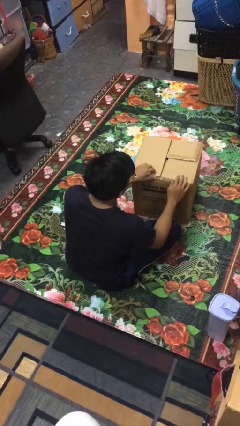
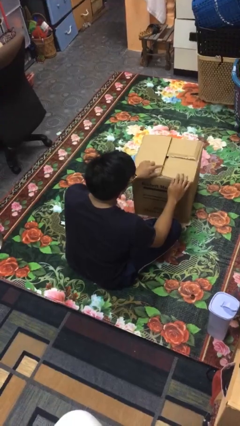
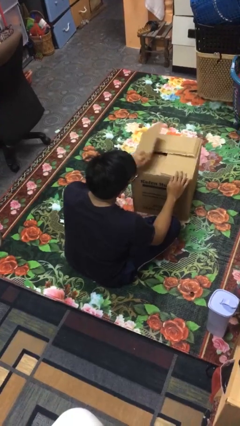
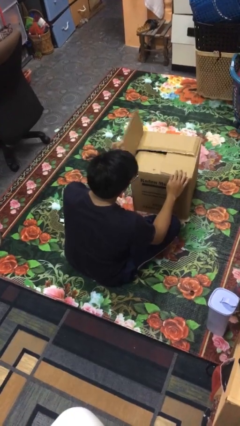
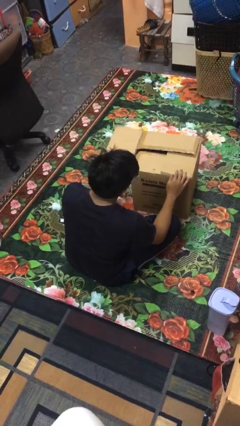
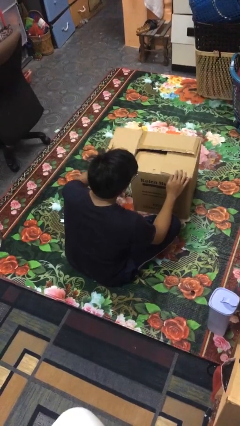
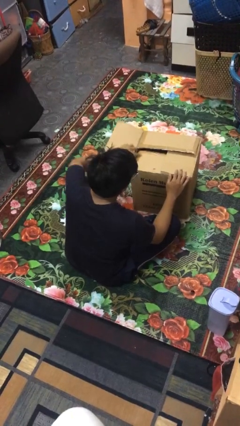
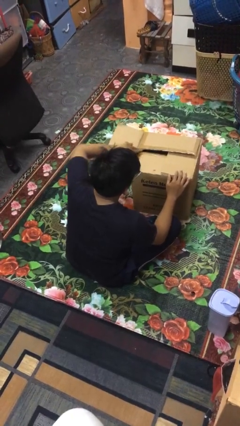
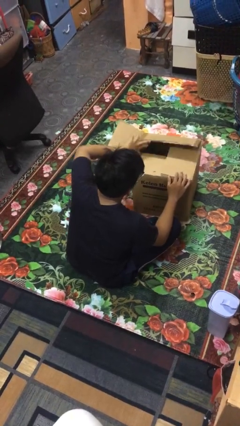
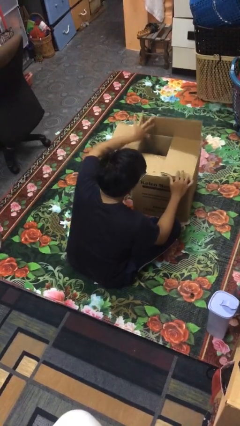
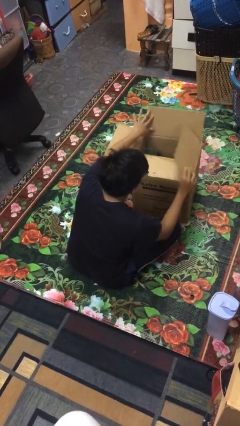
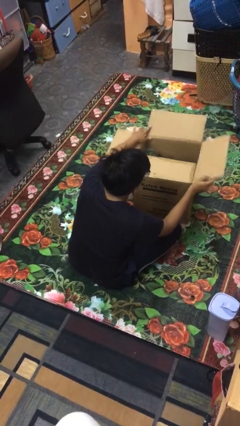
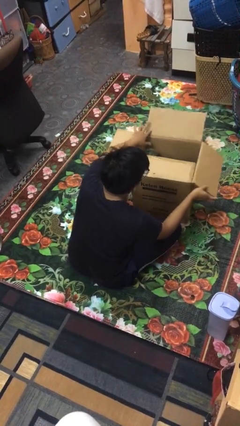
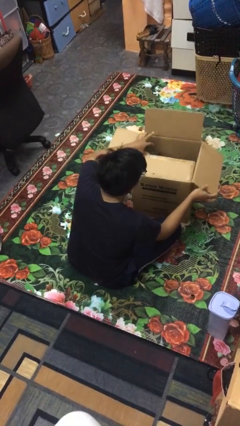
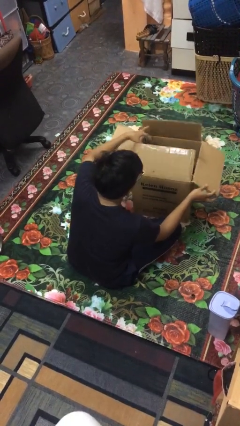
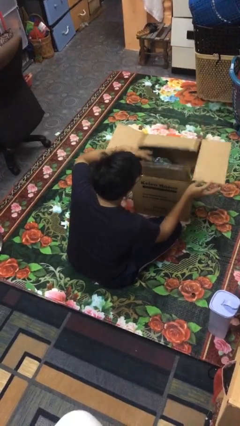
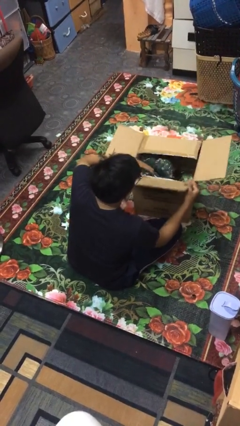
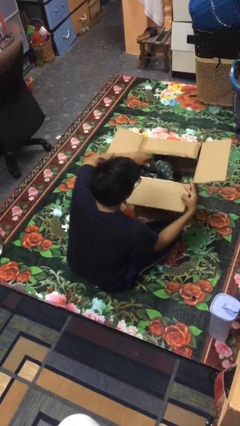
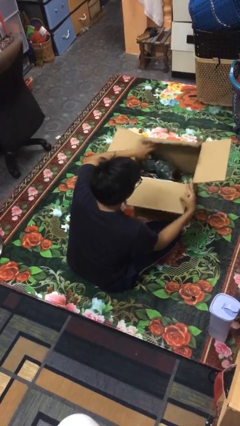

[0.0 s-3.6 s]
person opens box

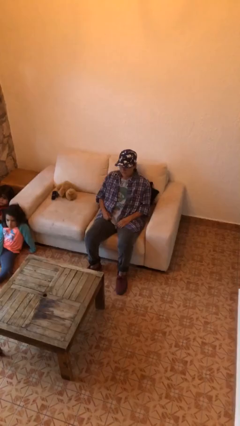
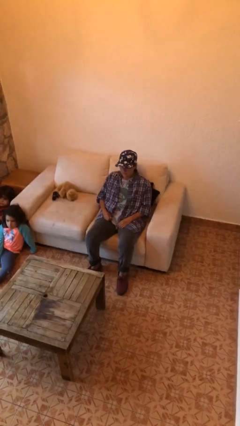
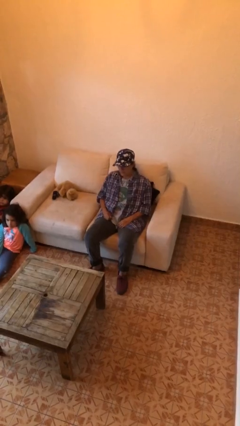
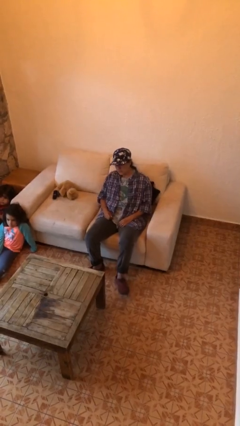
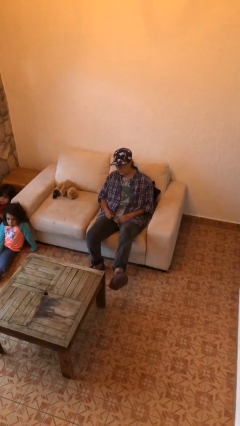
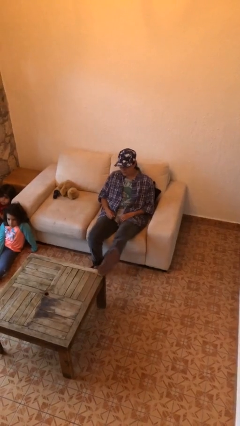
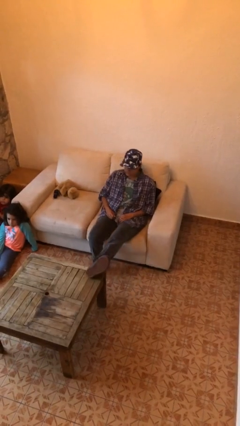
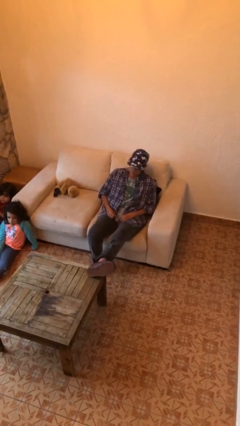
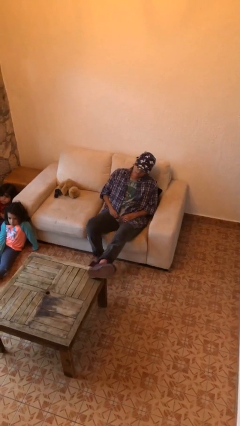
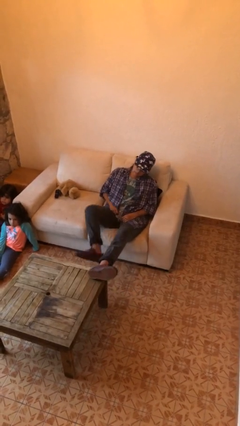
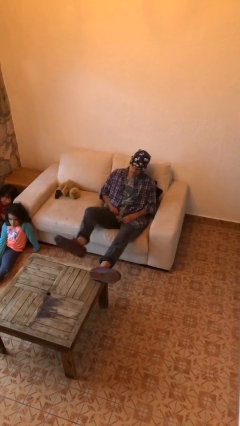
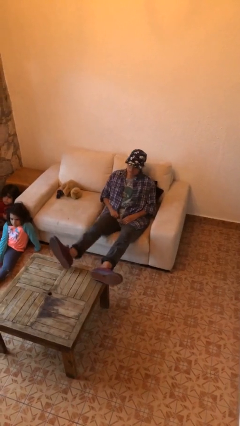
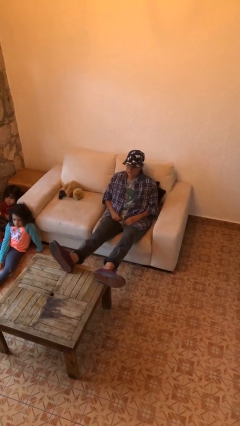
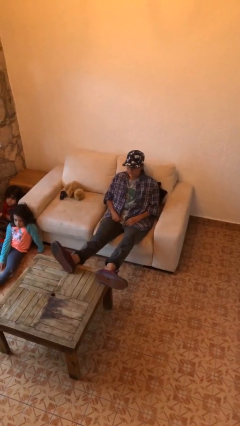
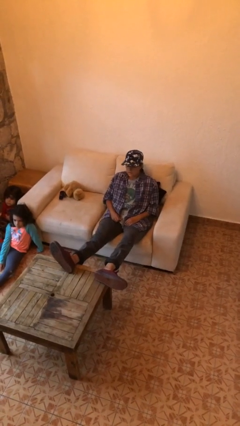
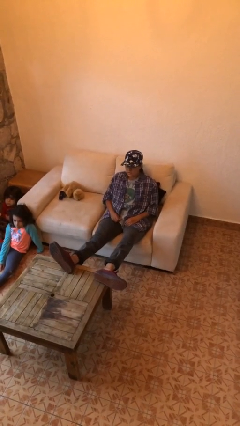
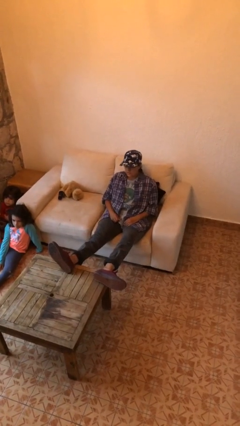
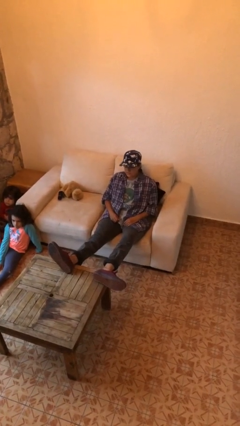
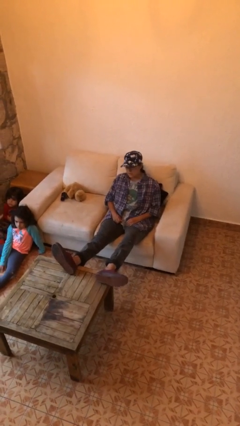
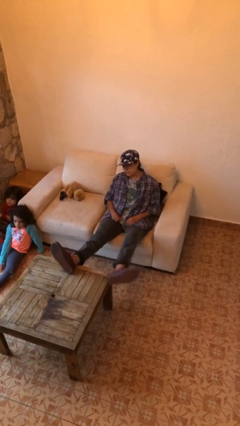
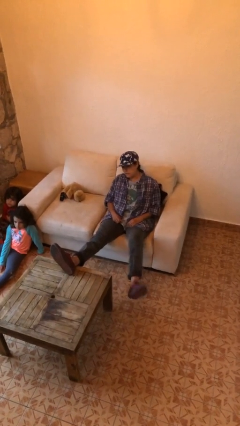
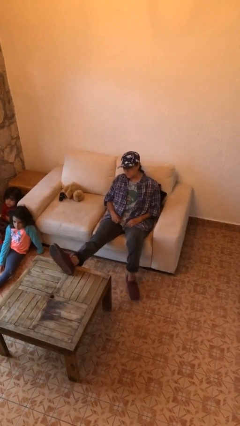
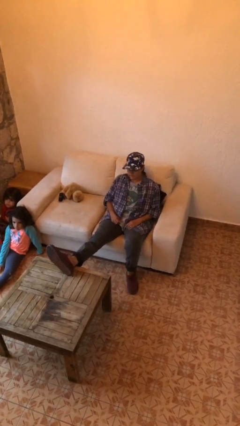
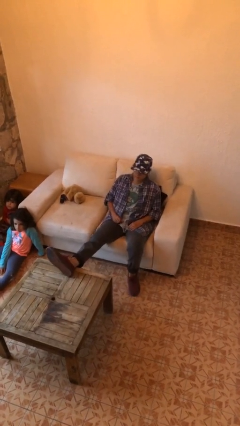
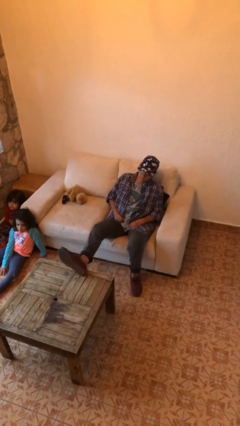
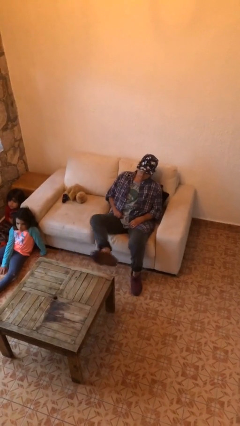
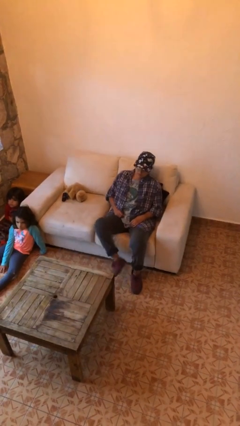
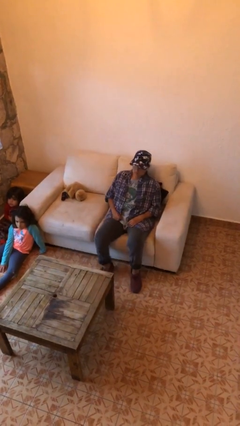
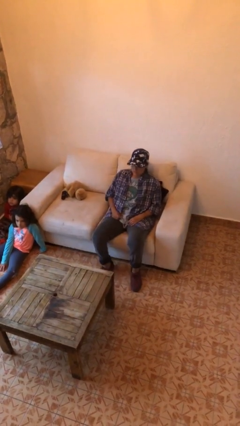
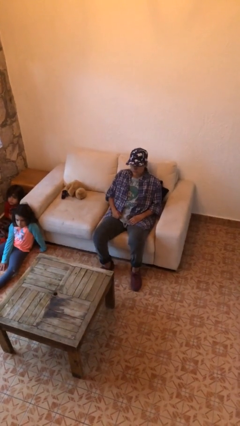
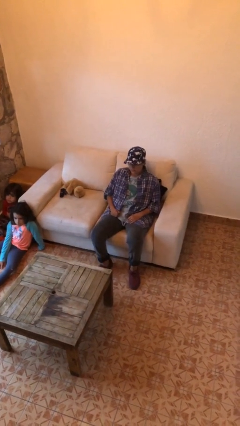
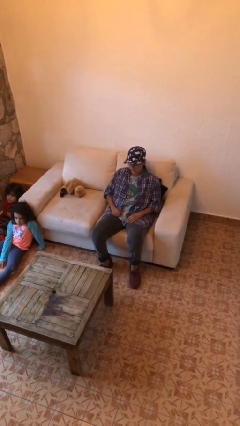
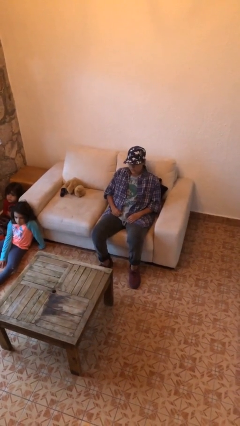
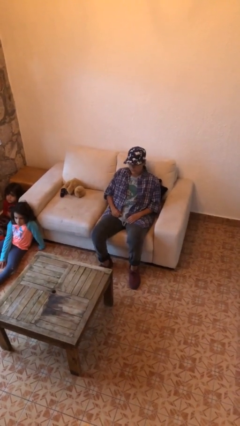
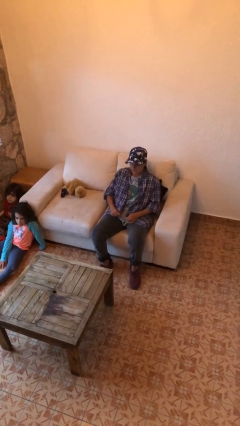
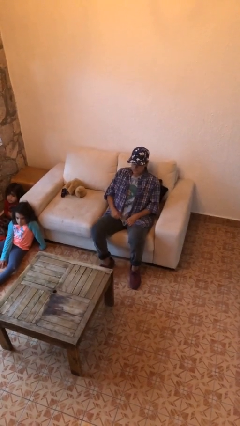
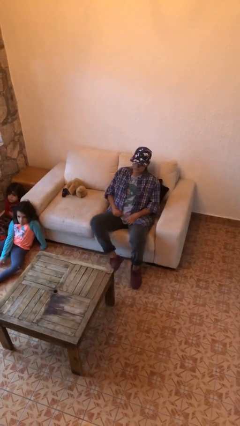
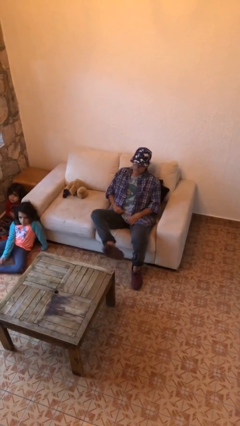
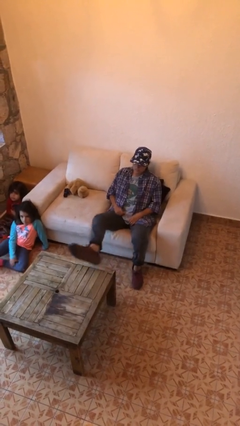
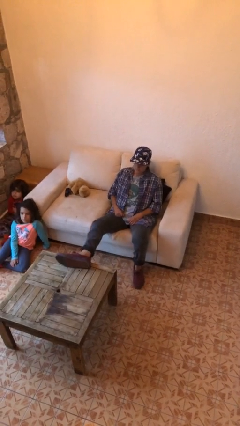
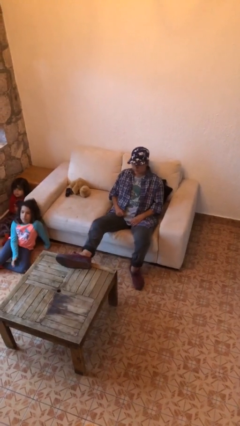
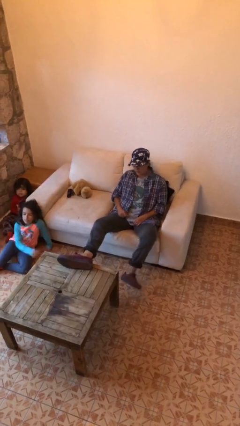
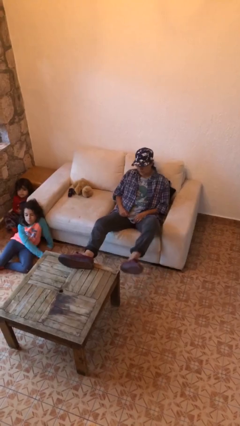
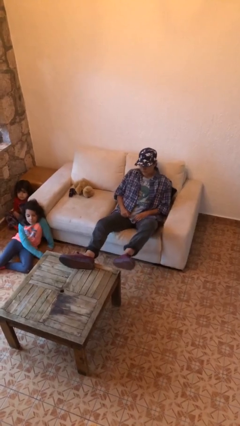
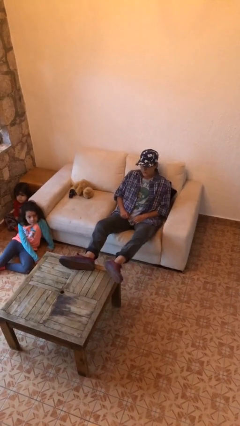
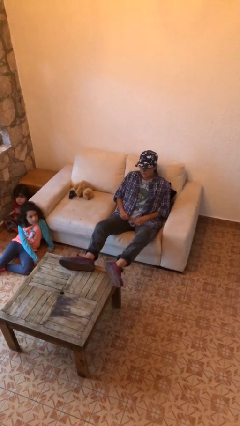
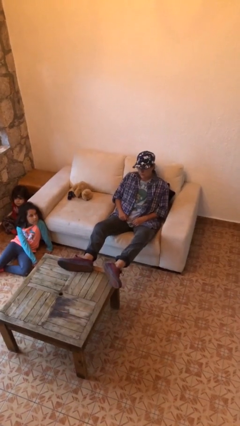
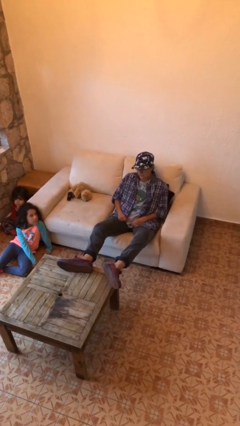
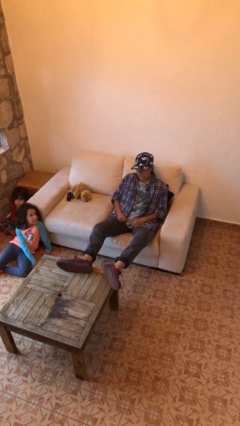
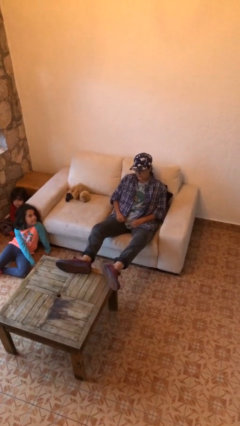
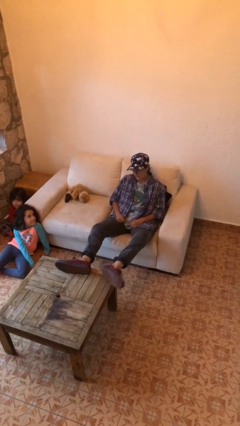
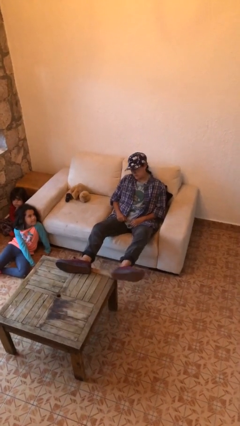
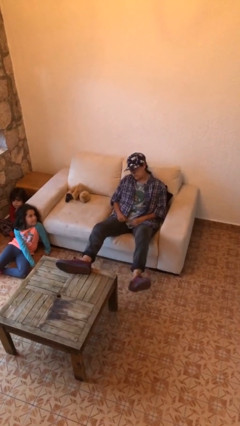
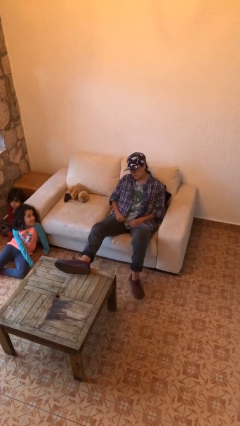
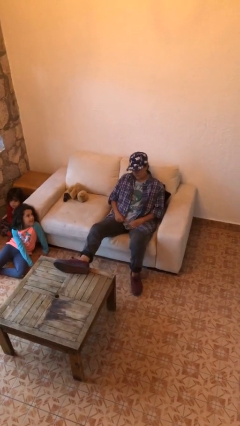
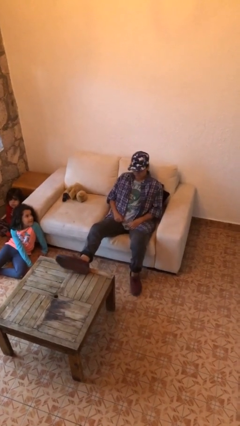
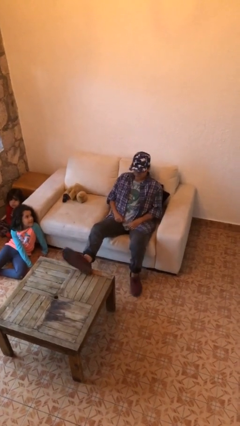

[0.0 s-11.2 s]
person puts feet up

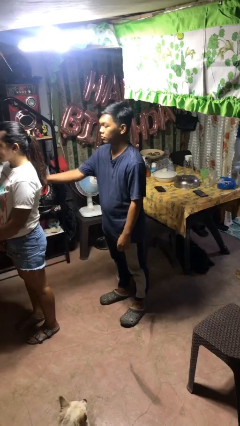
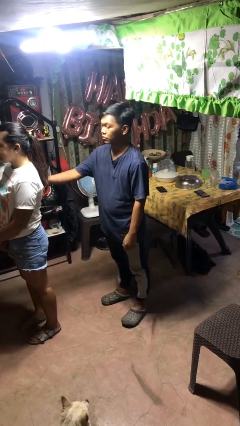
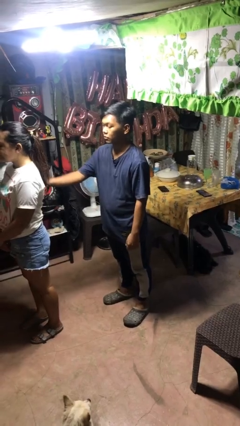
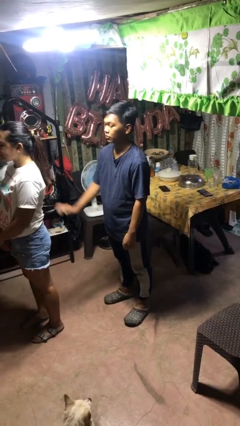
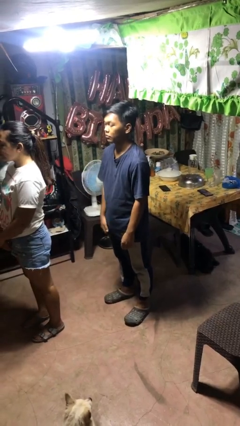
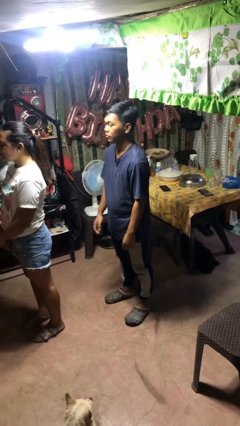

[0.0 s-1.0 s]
person touches back of person

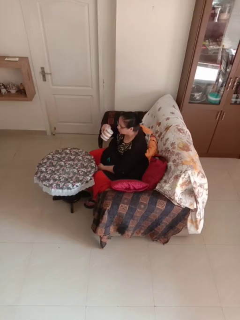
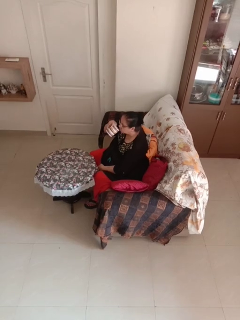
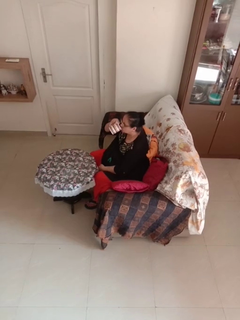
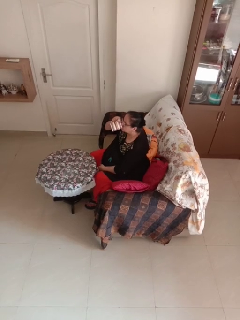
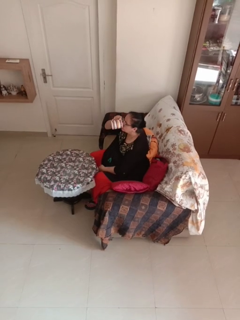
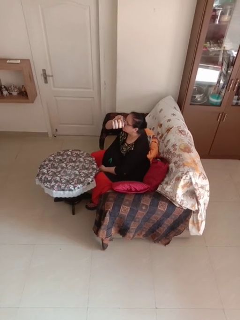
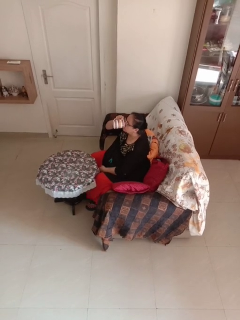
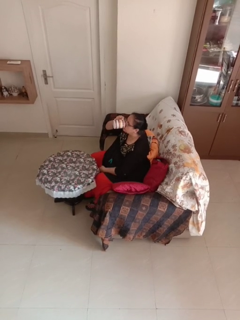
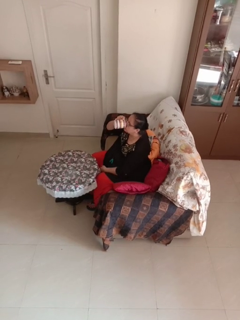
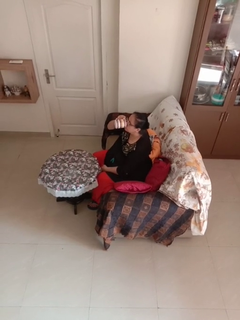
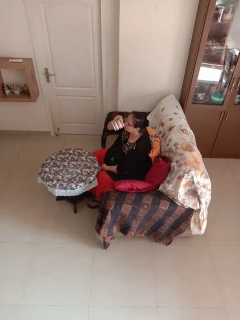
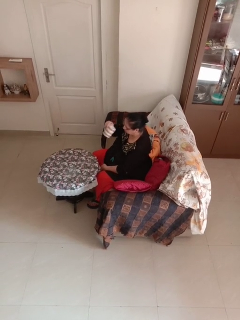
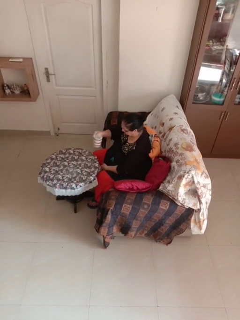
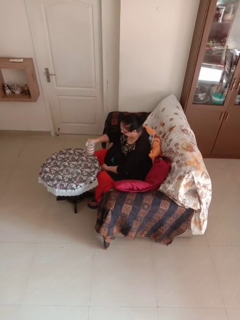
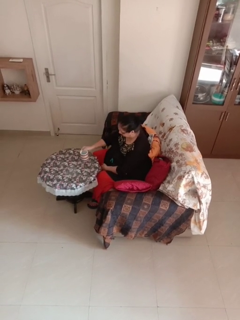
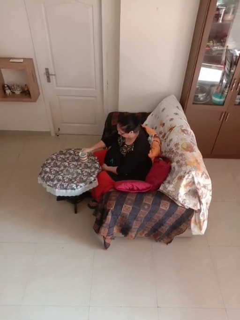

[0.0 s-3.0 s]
person drinks from mug
